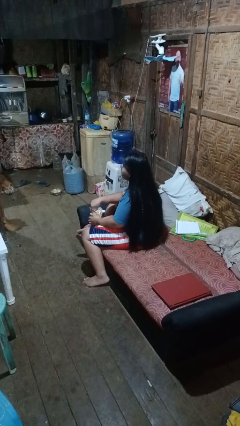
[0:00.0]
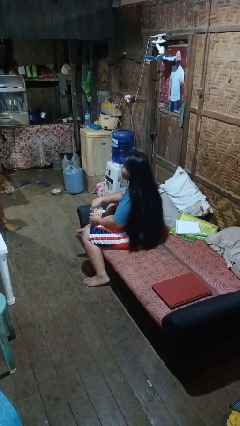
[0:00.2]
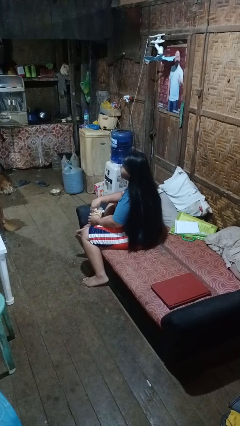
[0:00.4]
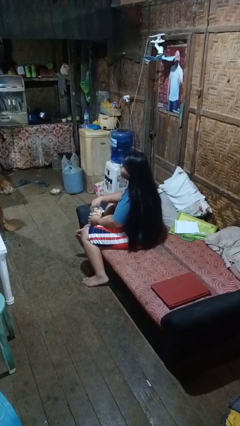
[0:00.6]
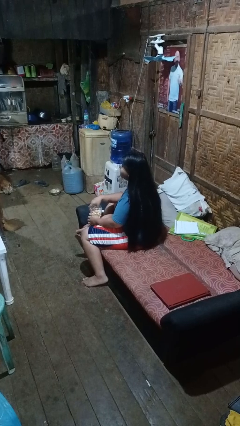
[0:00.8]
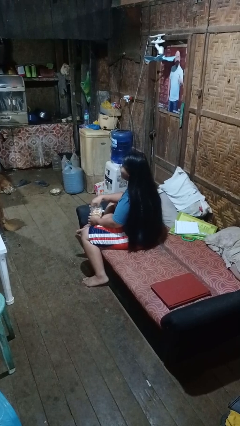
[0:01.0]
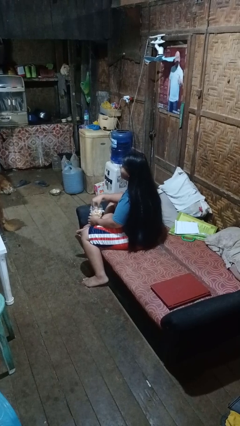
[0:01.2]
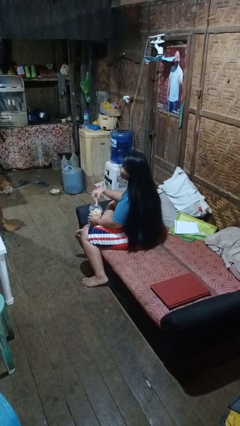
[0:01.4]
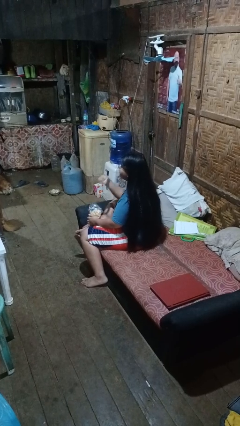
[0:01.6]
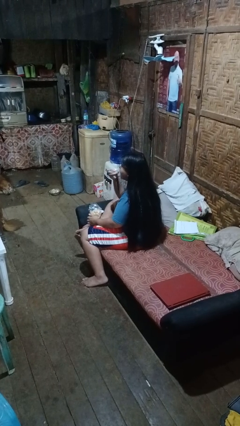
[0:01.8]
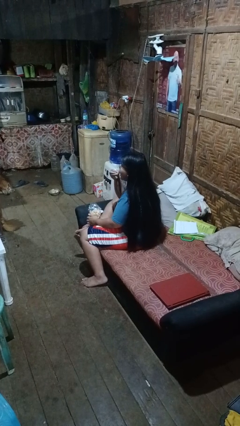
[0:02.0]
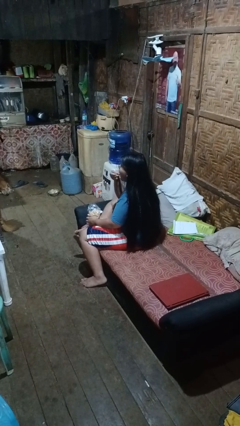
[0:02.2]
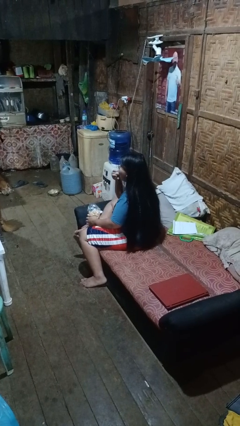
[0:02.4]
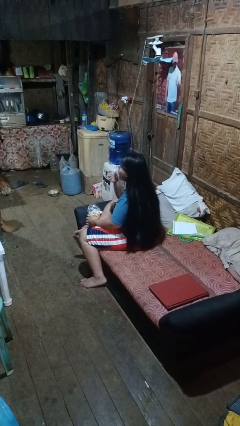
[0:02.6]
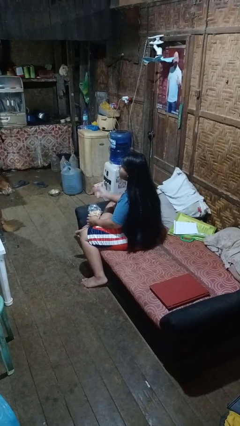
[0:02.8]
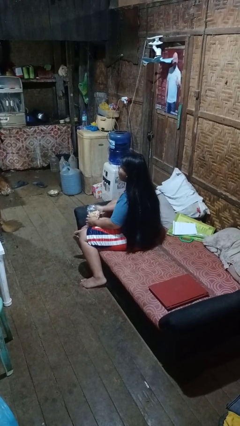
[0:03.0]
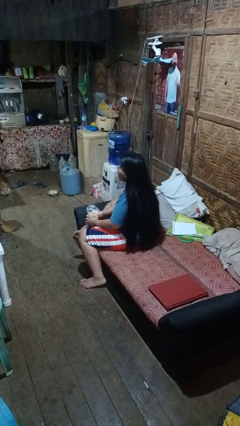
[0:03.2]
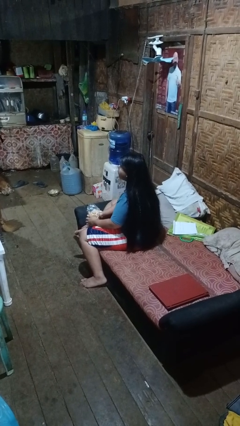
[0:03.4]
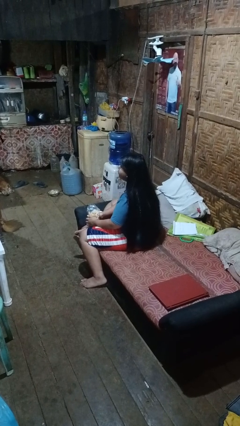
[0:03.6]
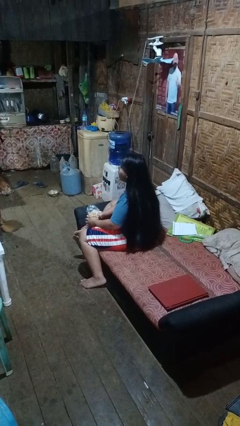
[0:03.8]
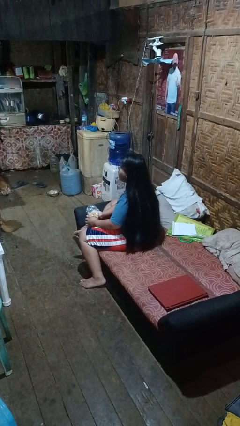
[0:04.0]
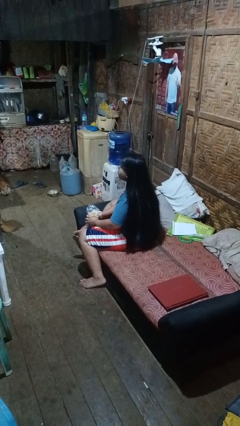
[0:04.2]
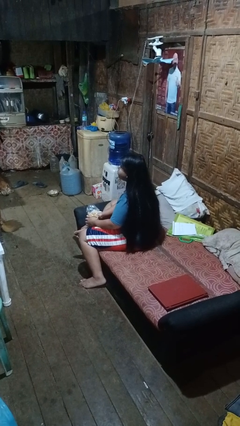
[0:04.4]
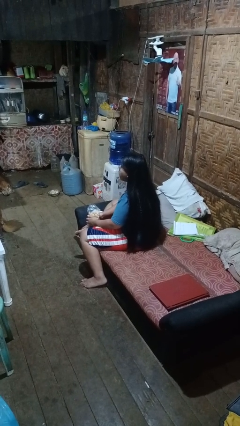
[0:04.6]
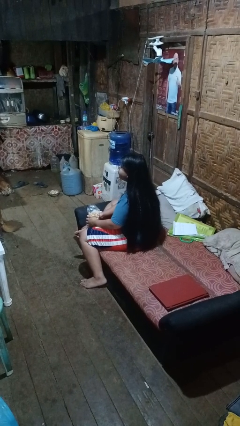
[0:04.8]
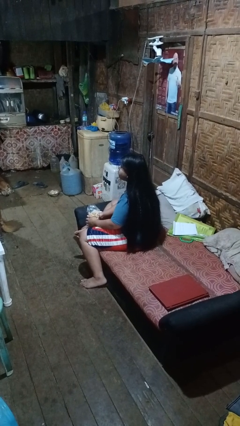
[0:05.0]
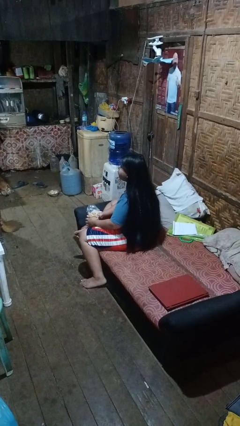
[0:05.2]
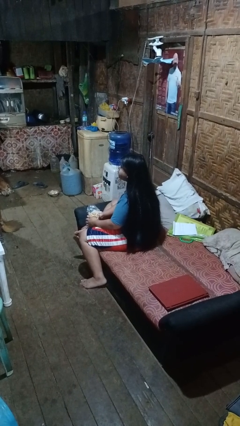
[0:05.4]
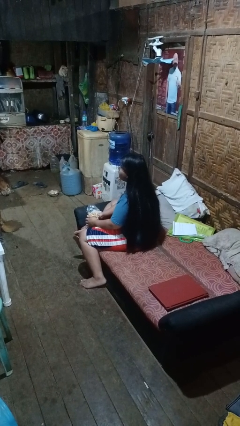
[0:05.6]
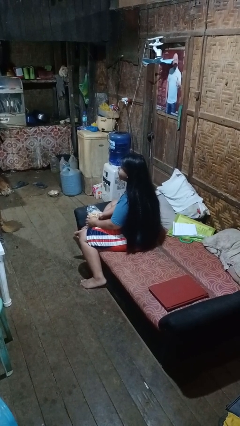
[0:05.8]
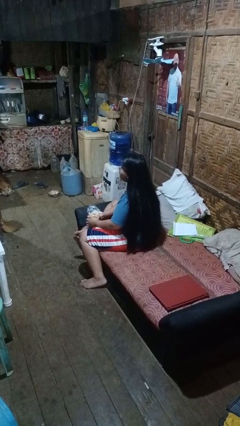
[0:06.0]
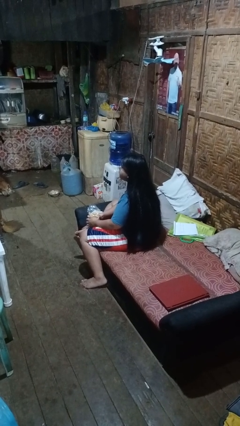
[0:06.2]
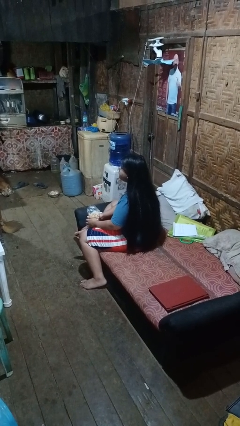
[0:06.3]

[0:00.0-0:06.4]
person eats snack from bag

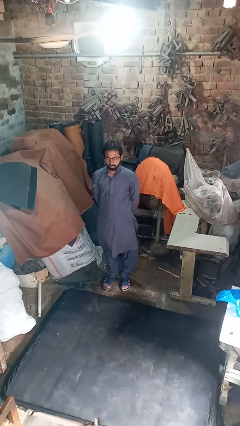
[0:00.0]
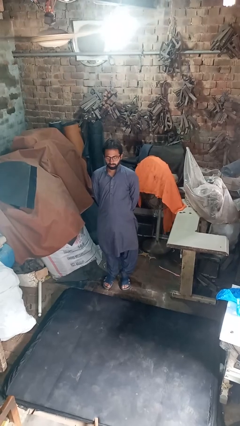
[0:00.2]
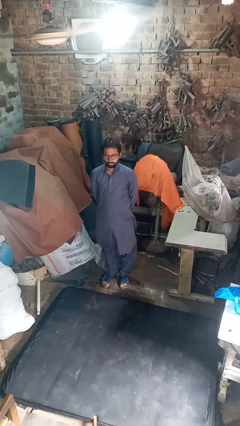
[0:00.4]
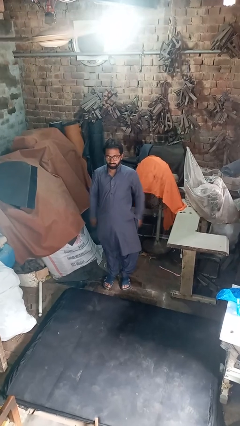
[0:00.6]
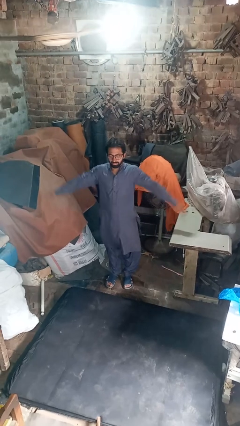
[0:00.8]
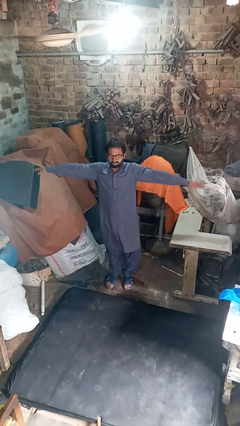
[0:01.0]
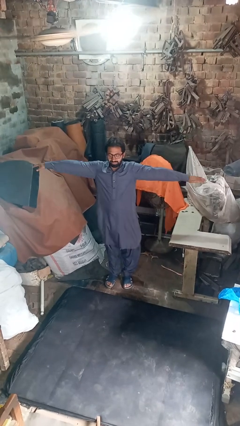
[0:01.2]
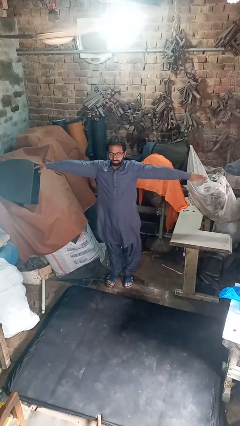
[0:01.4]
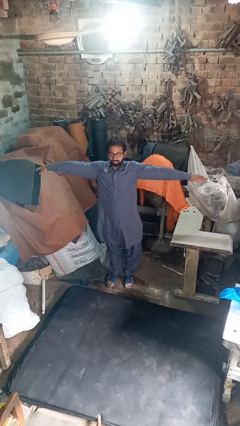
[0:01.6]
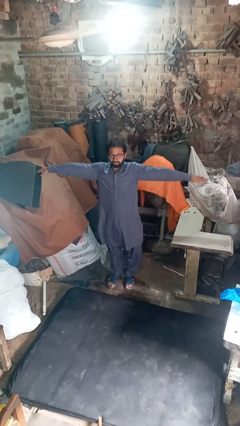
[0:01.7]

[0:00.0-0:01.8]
person stretches arms to side

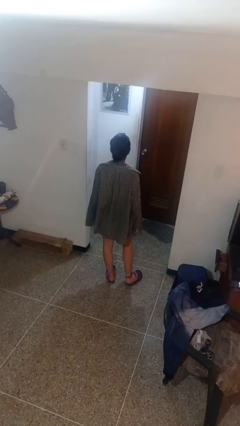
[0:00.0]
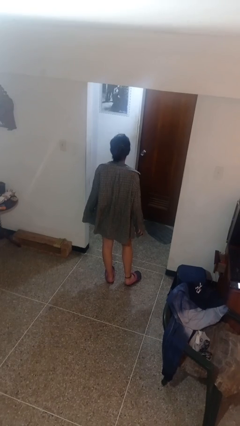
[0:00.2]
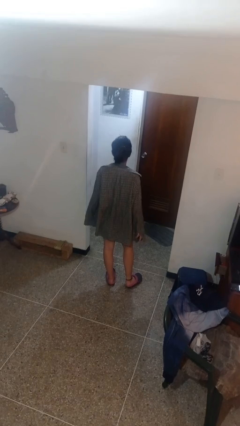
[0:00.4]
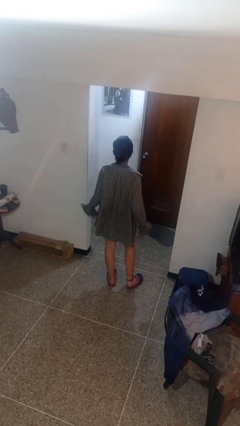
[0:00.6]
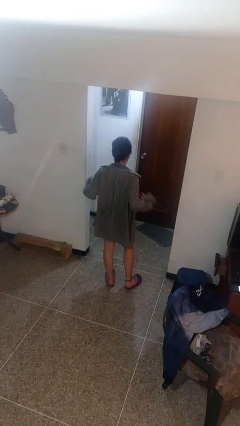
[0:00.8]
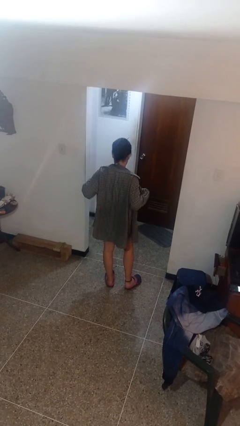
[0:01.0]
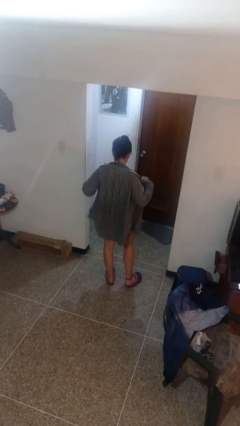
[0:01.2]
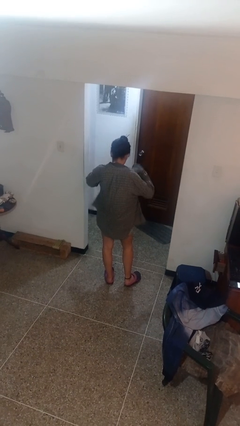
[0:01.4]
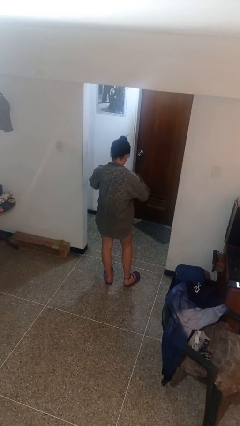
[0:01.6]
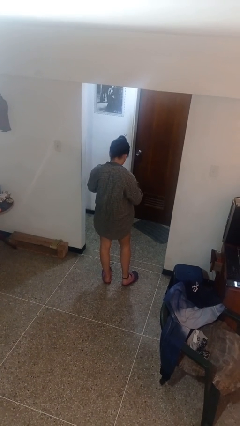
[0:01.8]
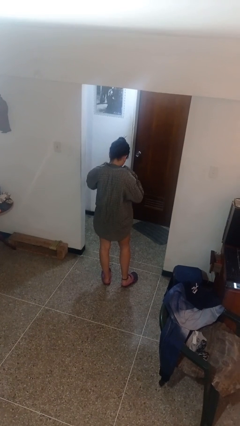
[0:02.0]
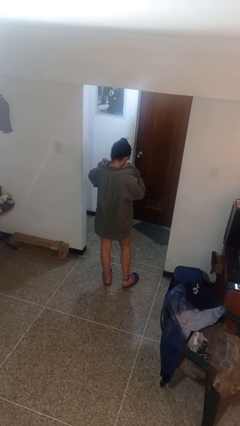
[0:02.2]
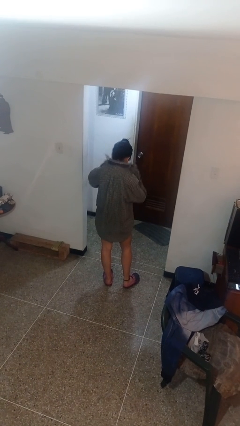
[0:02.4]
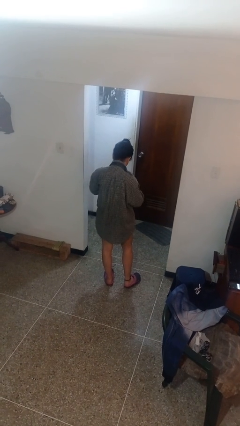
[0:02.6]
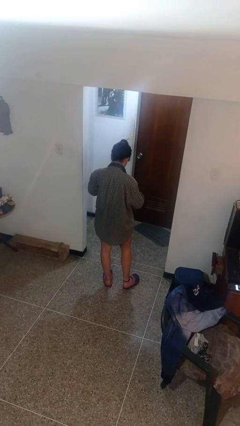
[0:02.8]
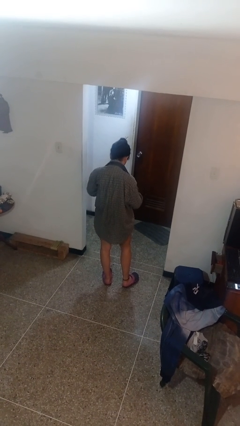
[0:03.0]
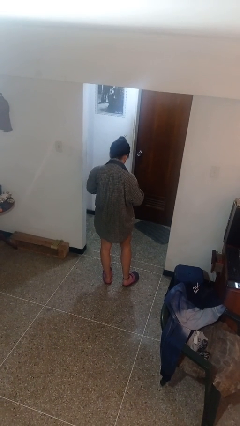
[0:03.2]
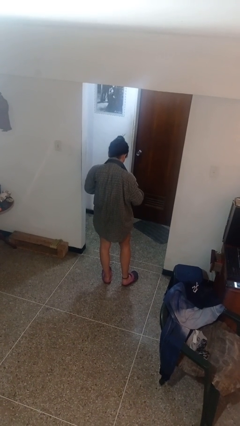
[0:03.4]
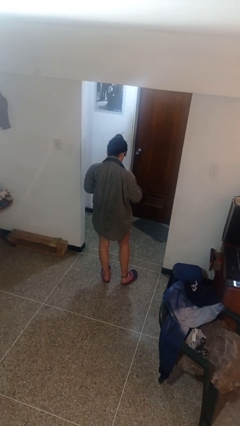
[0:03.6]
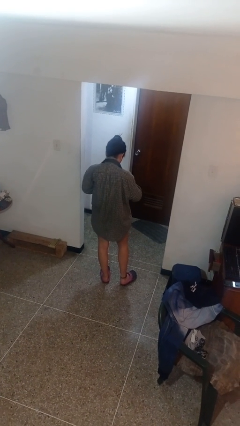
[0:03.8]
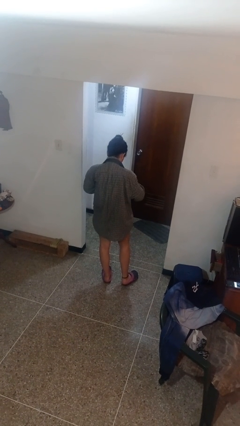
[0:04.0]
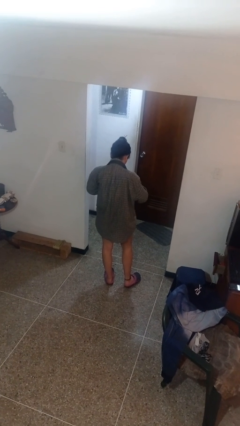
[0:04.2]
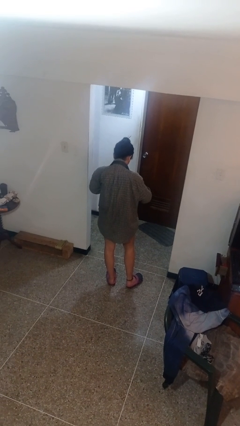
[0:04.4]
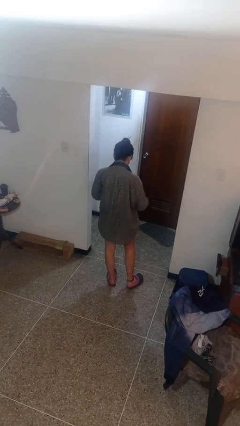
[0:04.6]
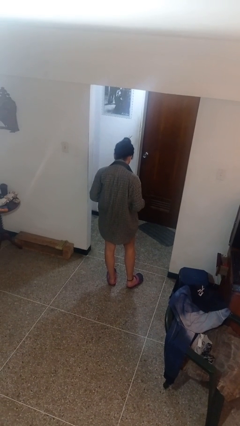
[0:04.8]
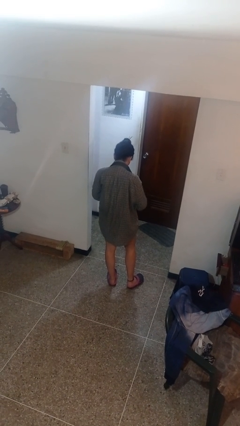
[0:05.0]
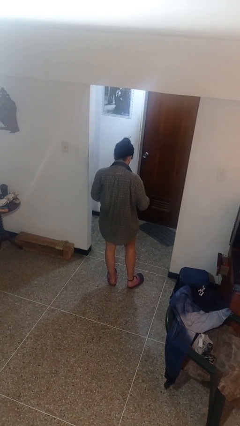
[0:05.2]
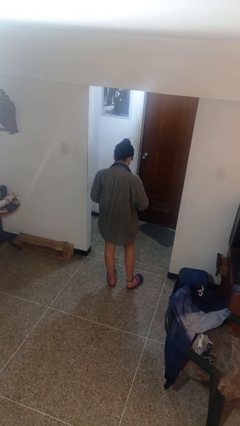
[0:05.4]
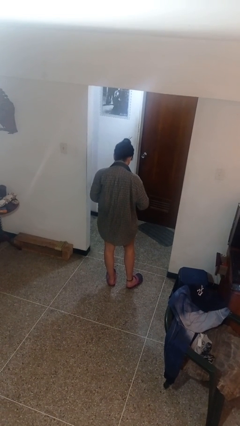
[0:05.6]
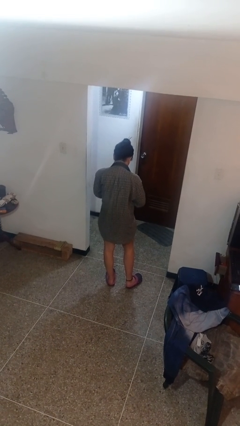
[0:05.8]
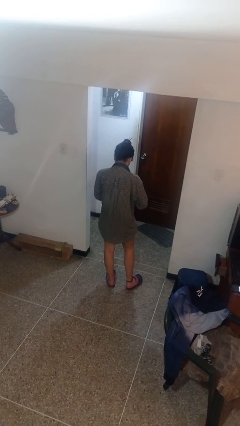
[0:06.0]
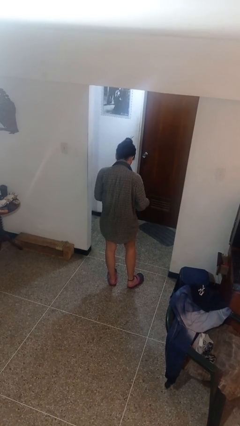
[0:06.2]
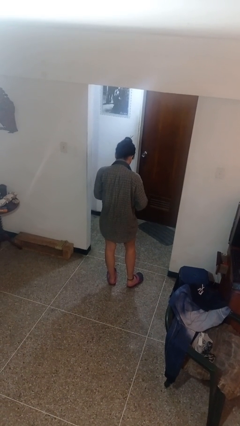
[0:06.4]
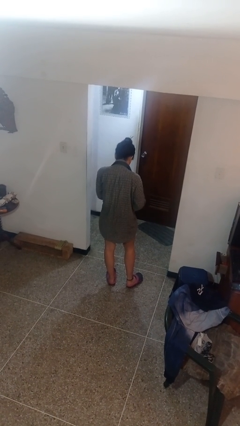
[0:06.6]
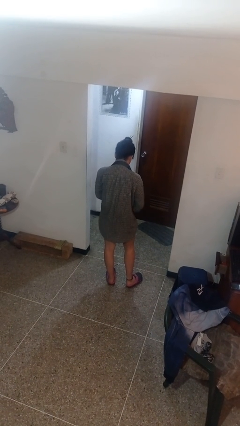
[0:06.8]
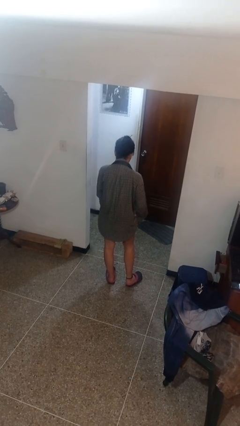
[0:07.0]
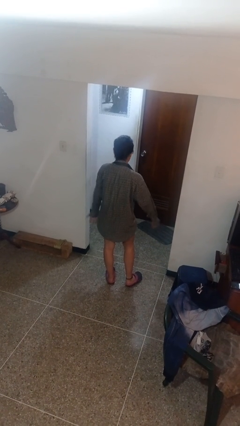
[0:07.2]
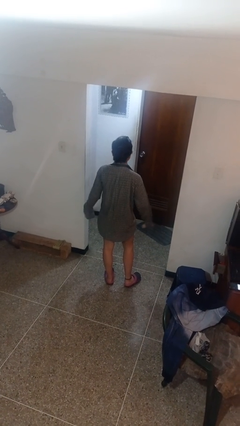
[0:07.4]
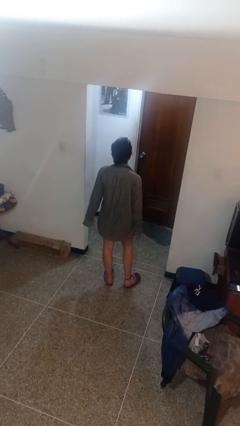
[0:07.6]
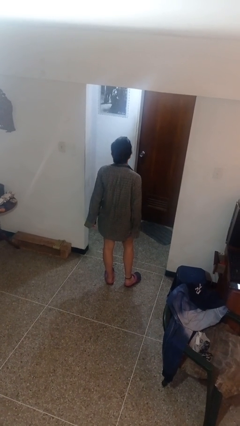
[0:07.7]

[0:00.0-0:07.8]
person buttons shirt

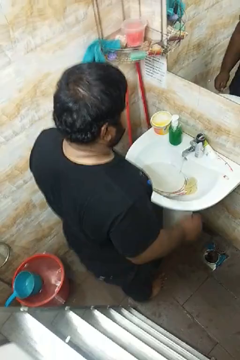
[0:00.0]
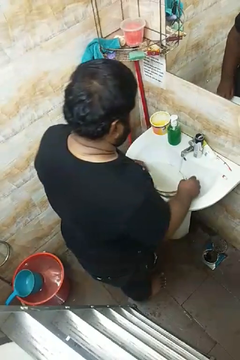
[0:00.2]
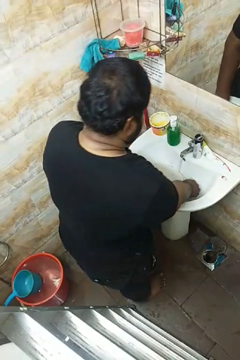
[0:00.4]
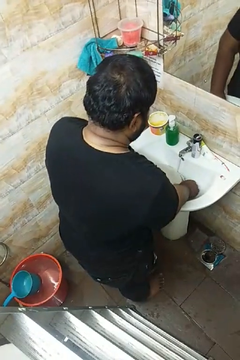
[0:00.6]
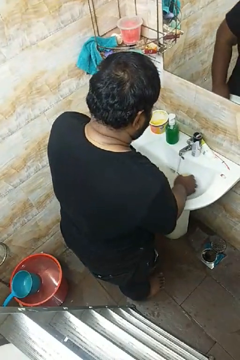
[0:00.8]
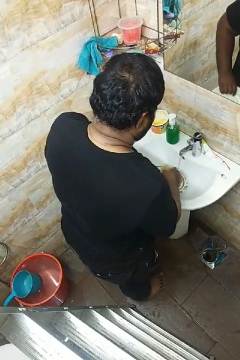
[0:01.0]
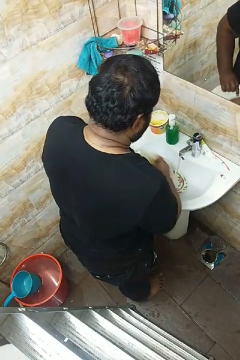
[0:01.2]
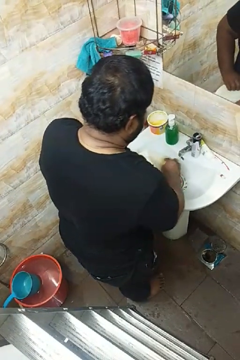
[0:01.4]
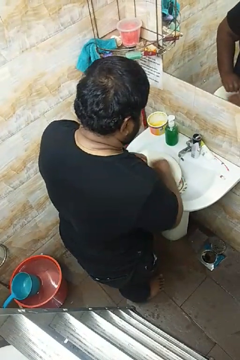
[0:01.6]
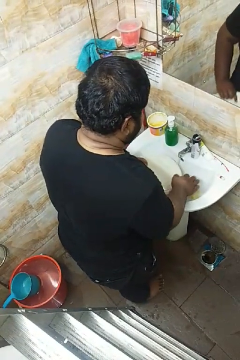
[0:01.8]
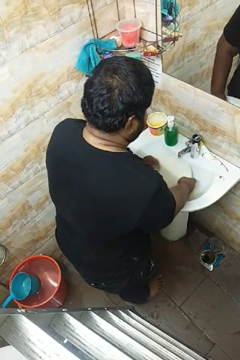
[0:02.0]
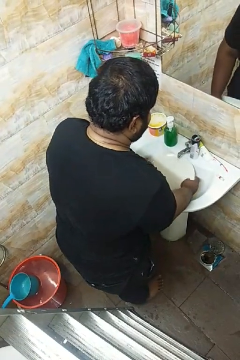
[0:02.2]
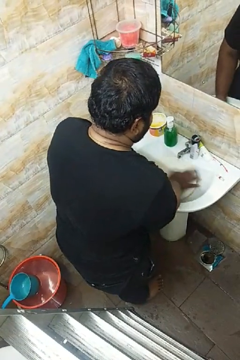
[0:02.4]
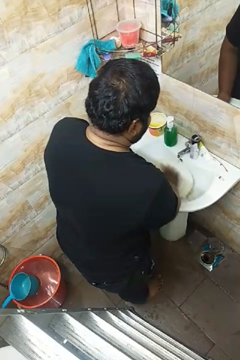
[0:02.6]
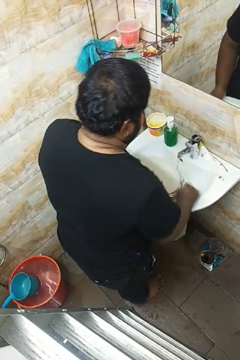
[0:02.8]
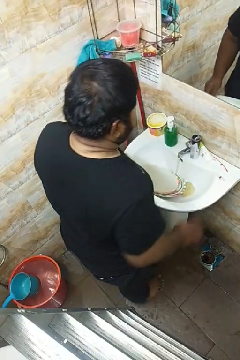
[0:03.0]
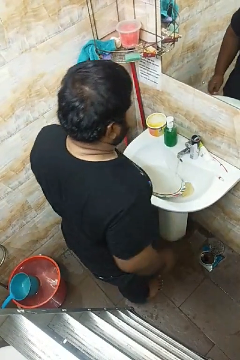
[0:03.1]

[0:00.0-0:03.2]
person washes dish
